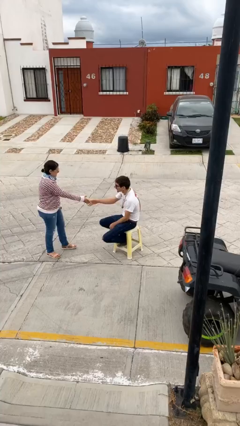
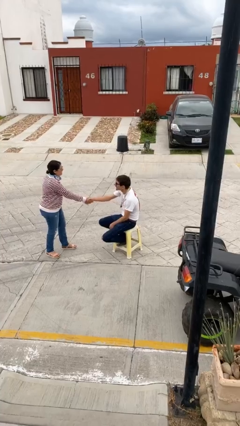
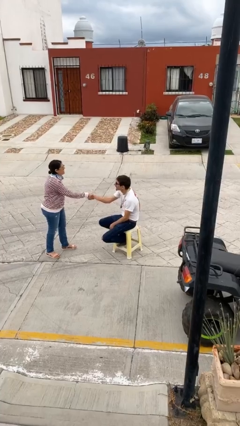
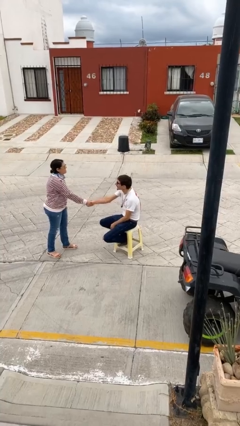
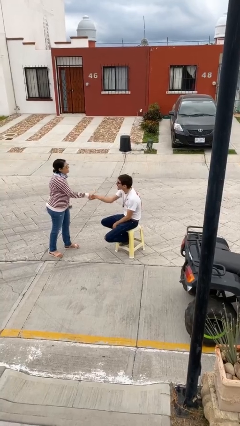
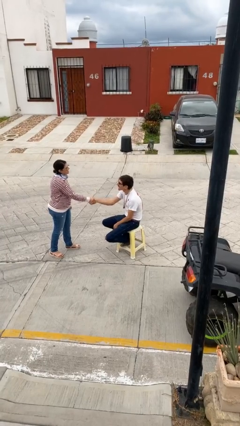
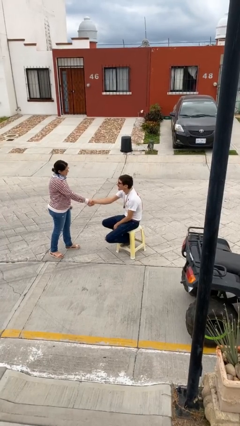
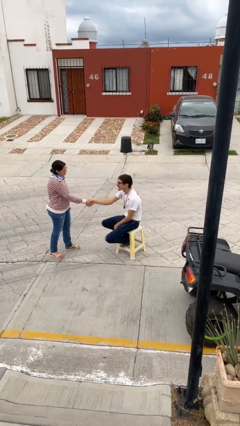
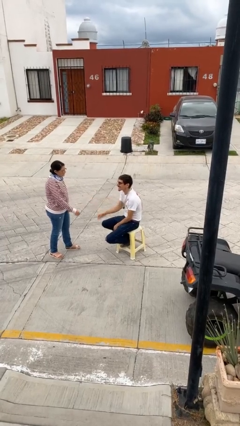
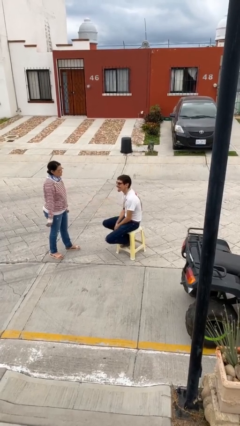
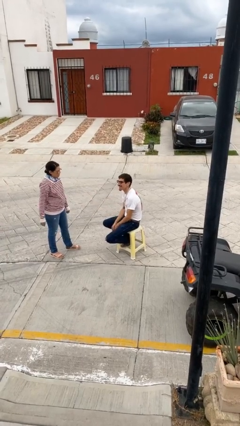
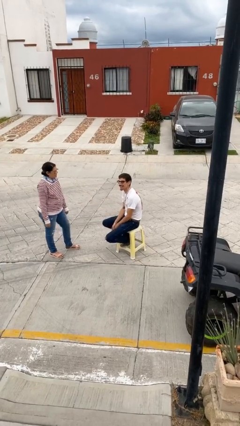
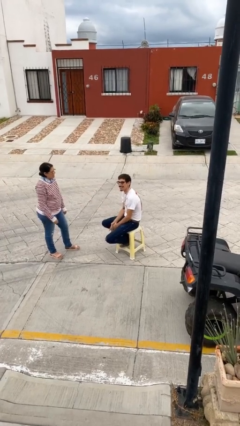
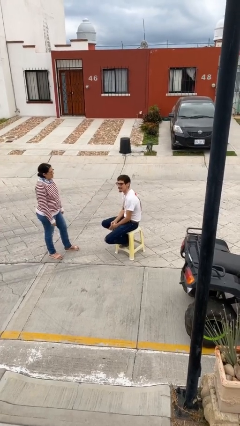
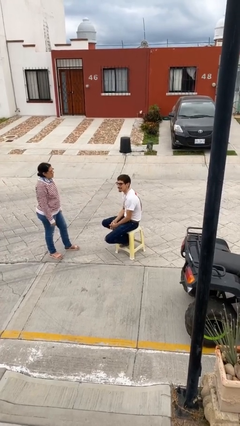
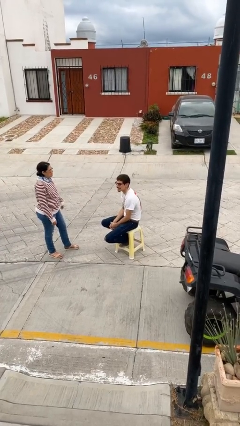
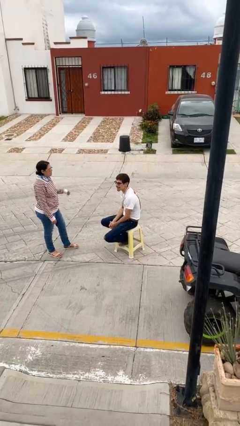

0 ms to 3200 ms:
person shakes hand

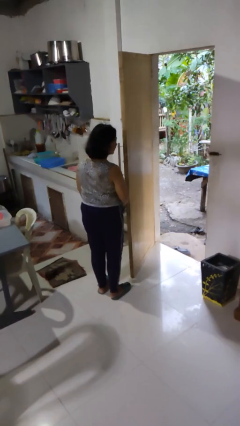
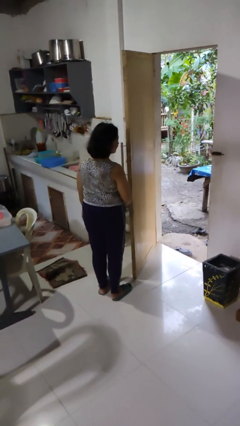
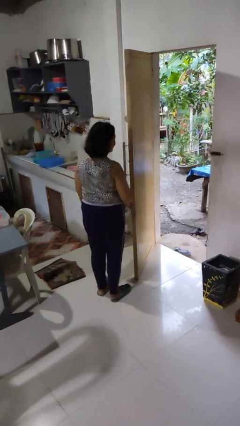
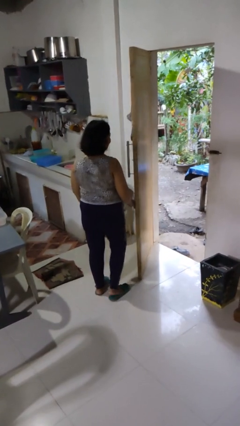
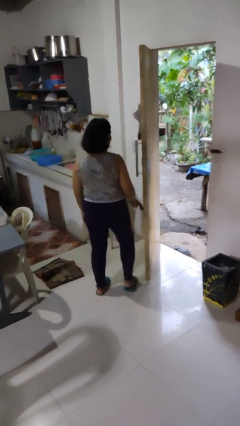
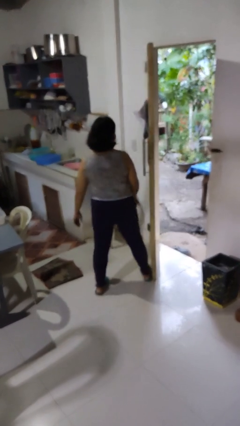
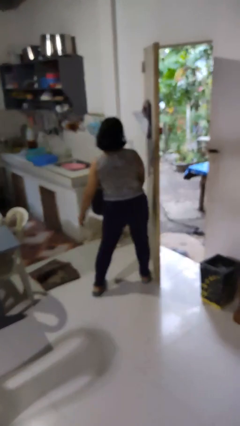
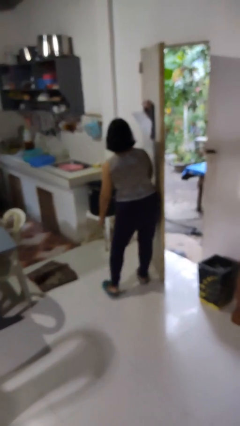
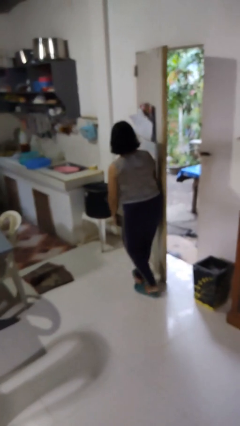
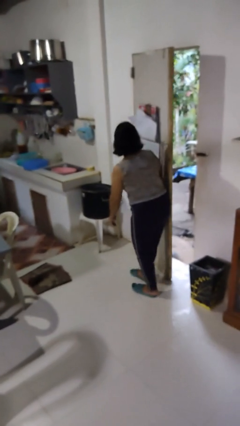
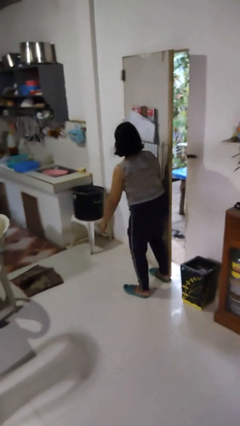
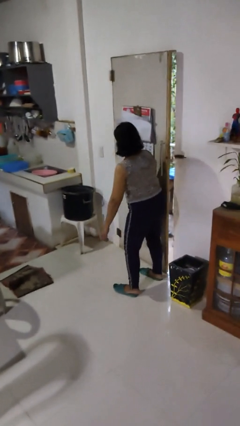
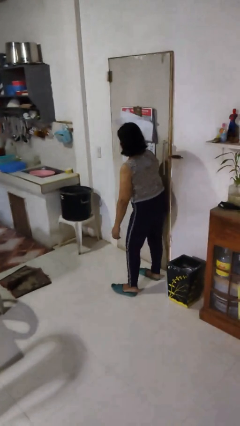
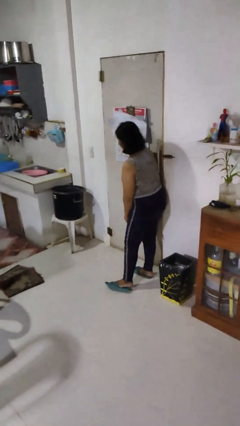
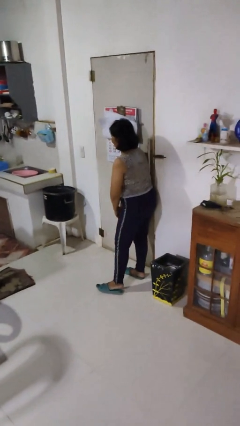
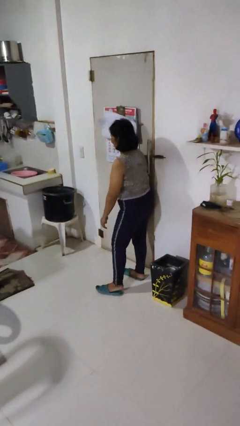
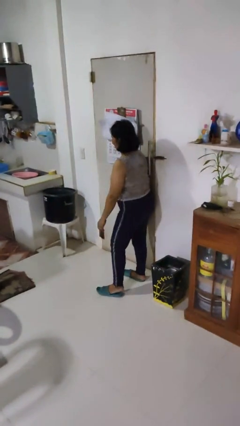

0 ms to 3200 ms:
person closes door with hip

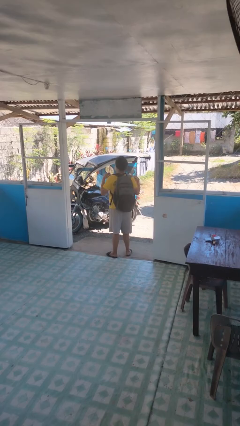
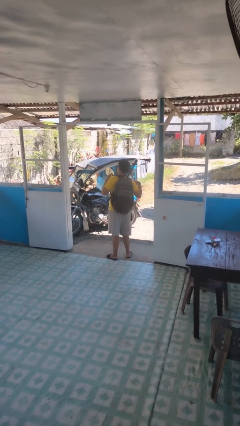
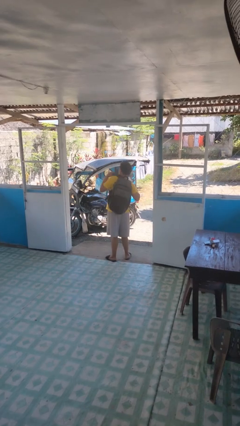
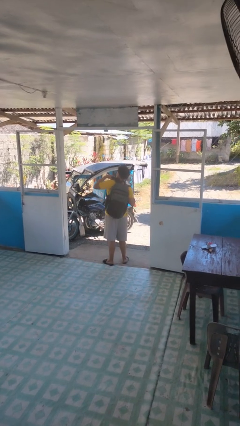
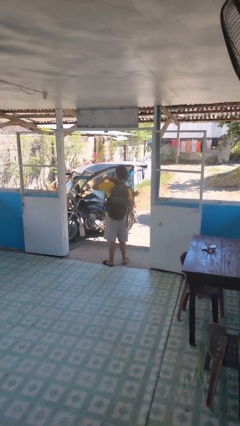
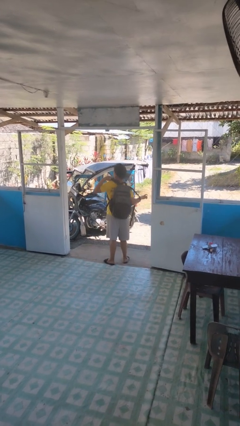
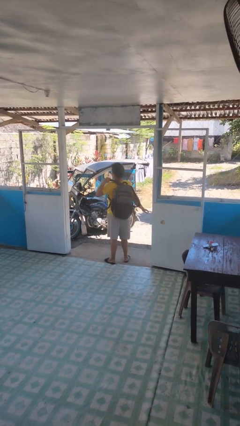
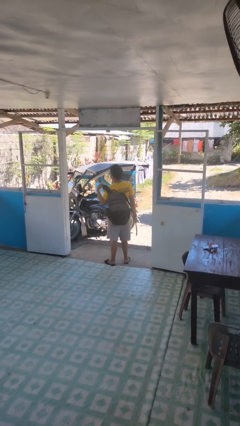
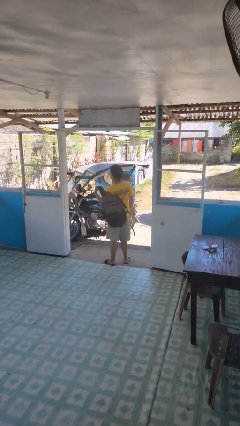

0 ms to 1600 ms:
person takes off backpack

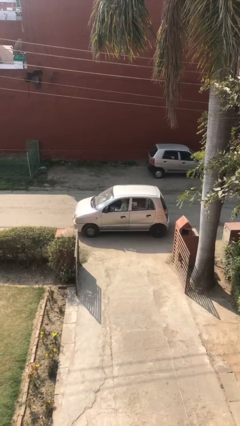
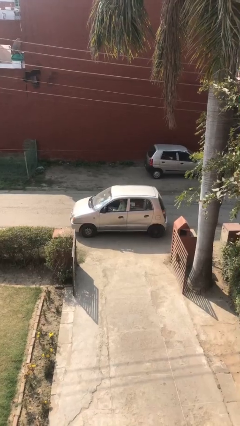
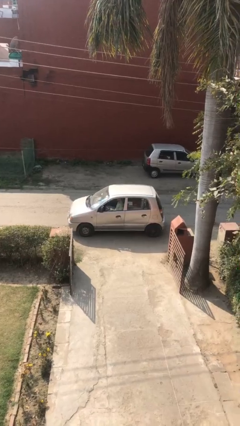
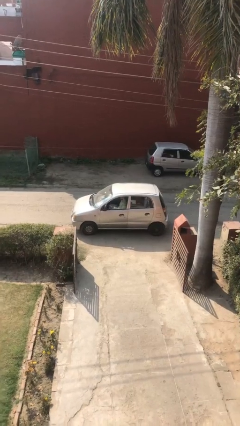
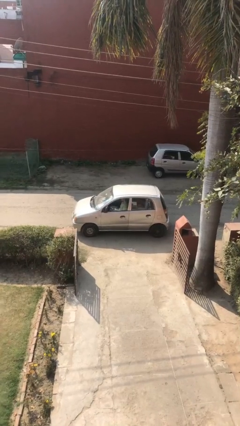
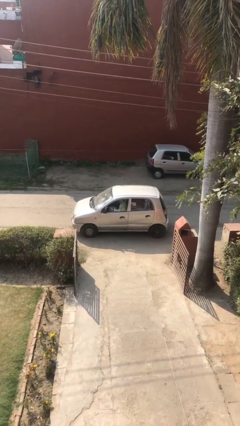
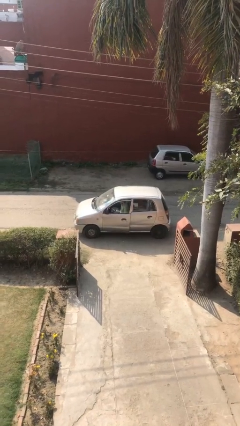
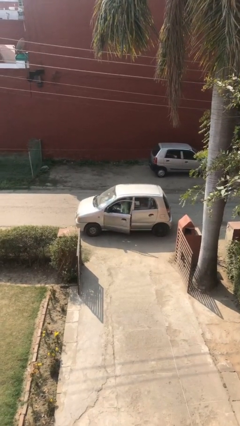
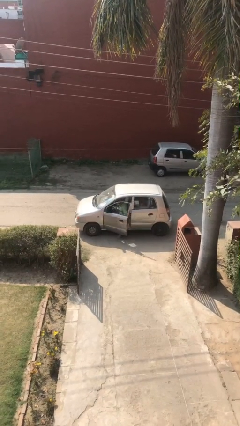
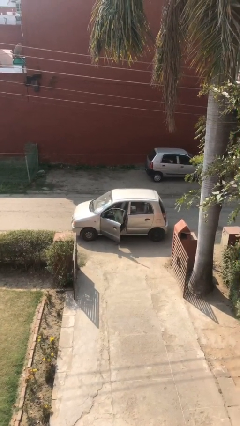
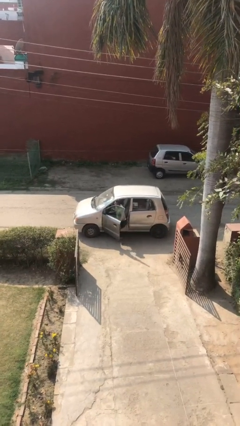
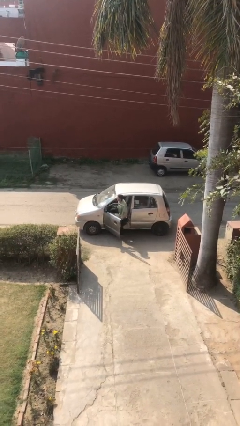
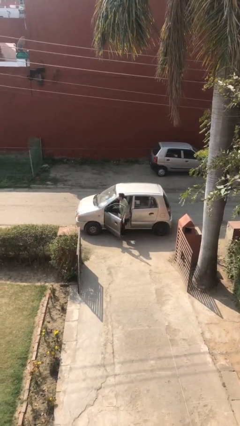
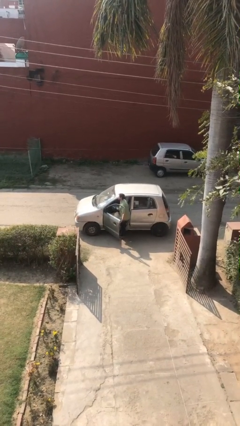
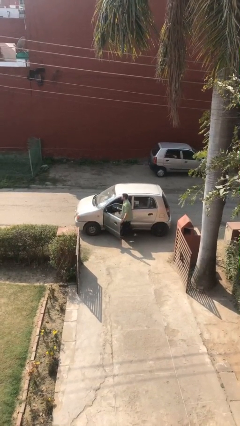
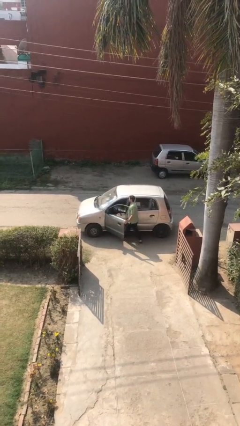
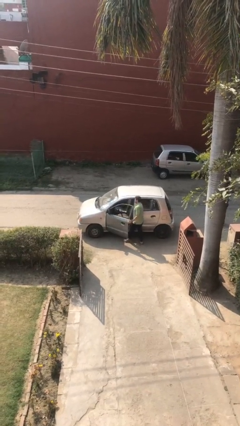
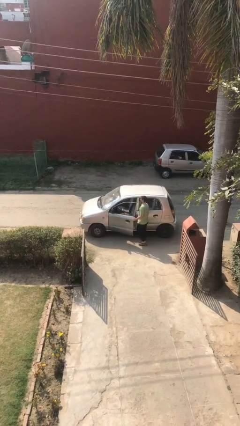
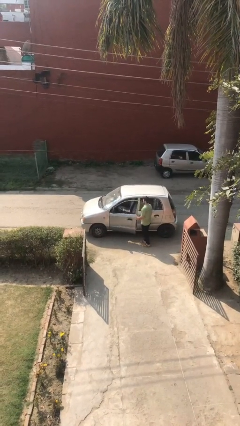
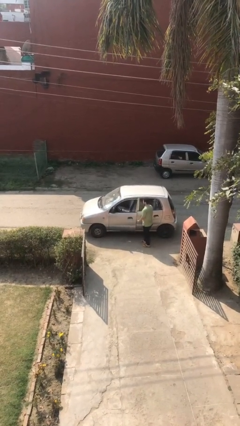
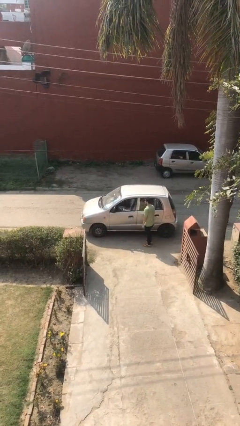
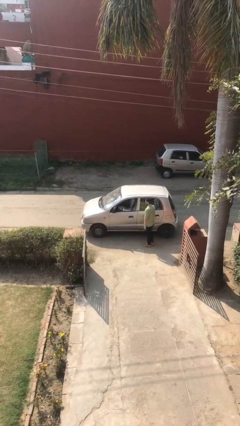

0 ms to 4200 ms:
car drops off person

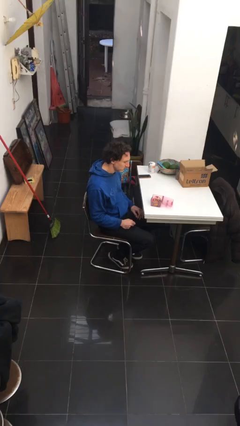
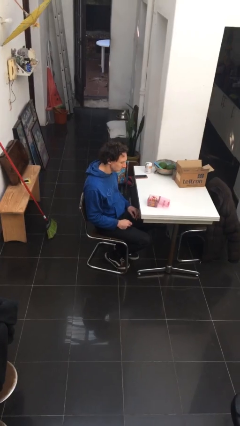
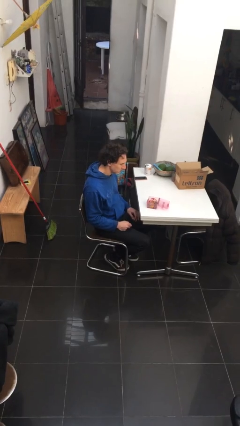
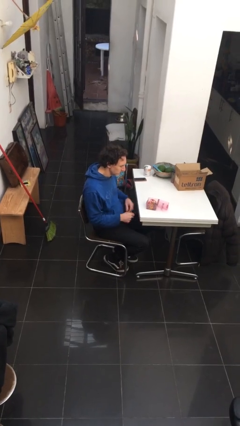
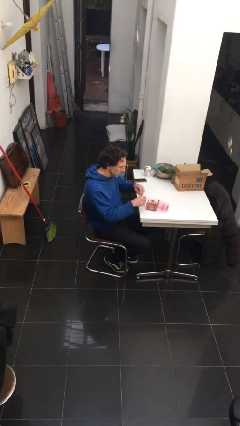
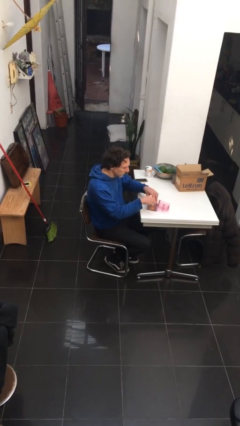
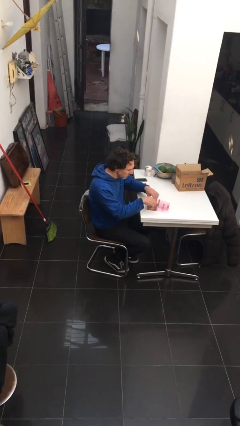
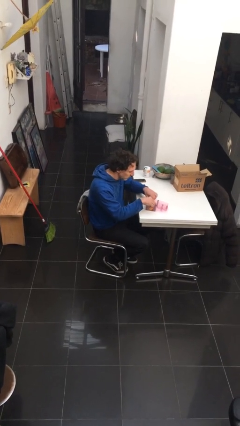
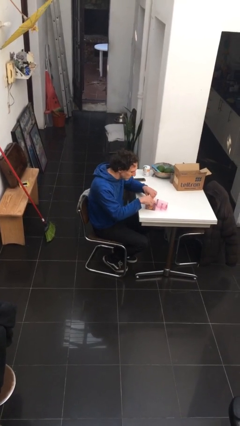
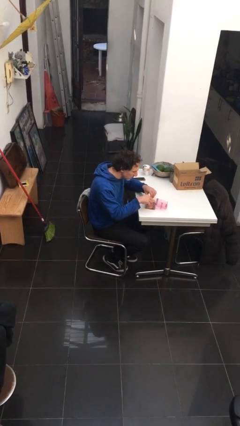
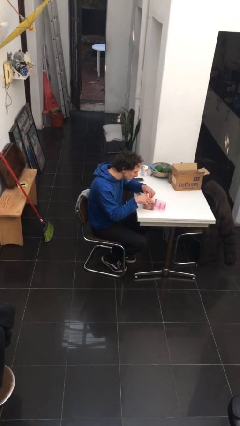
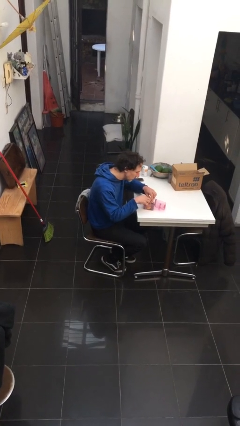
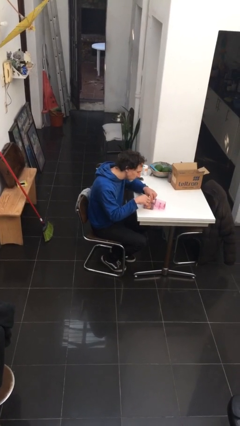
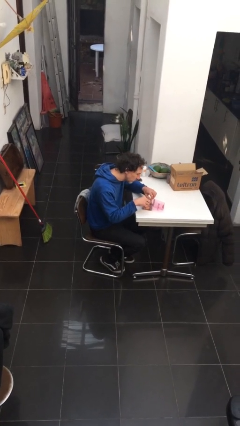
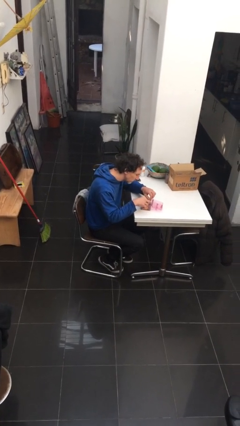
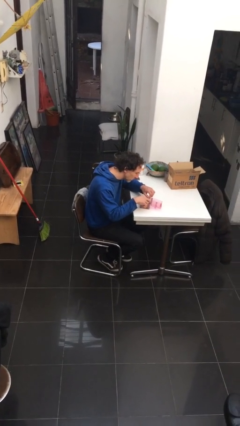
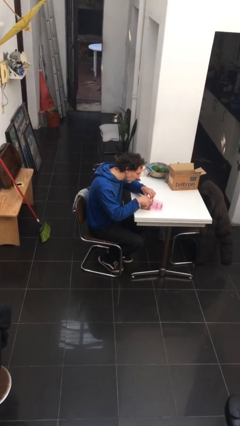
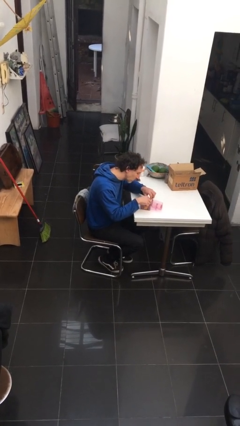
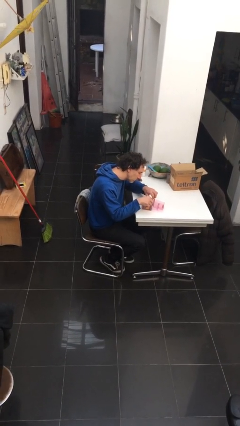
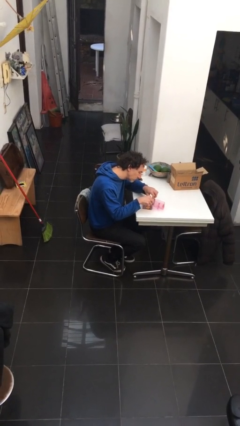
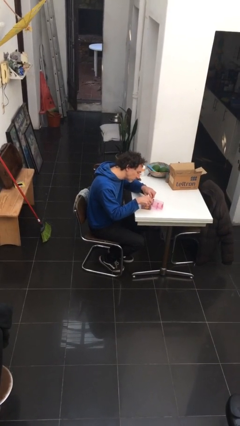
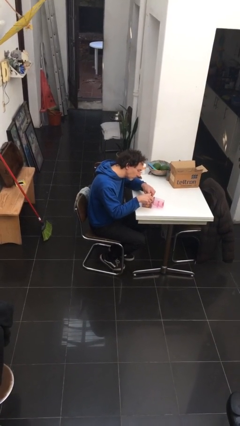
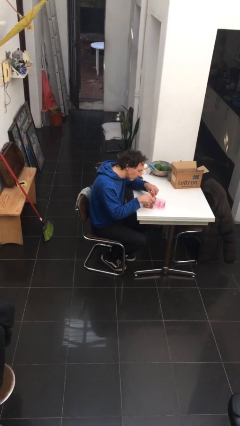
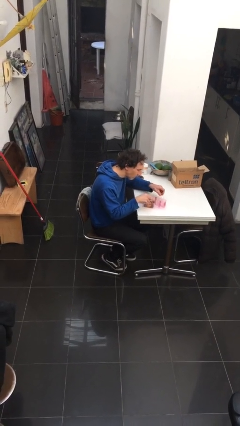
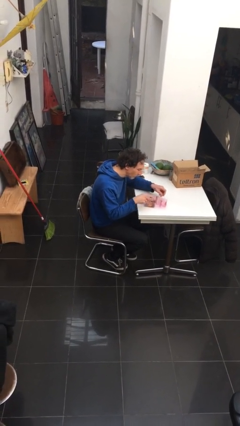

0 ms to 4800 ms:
person searches jewelry box

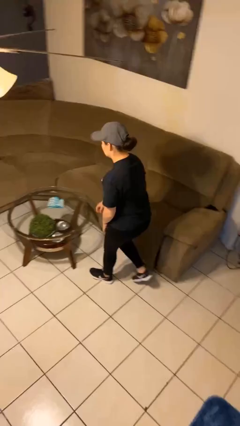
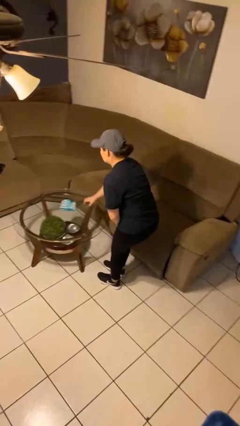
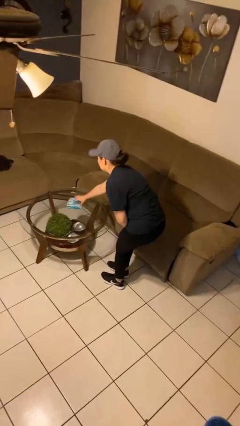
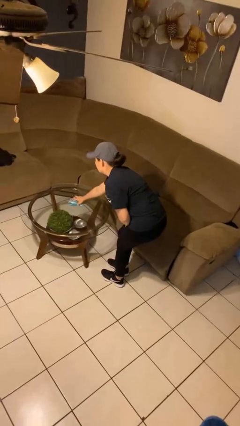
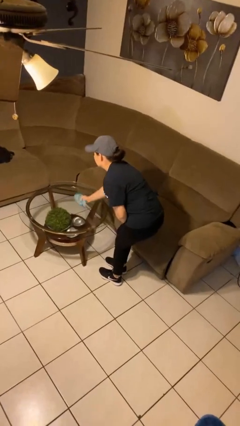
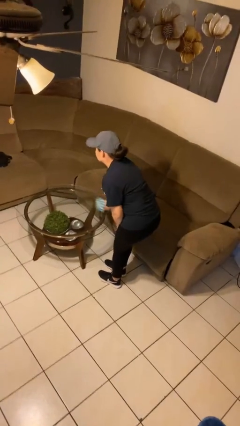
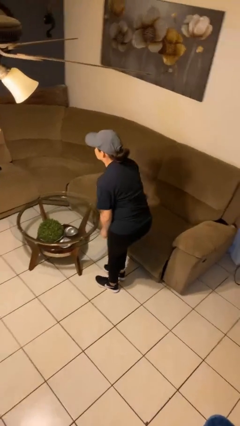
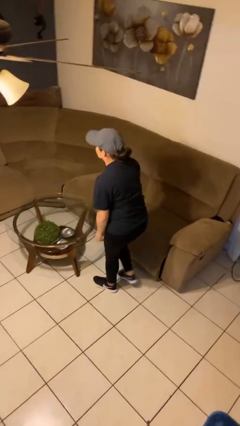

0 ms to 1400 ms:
person picks up object from table
